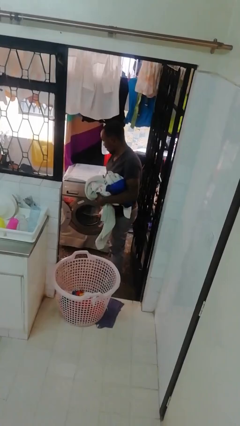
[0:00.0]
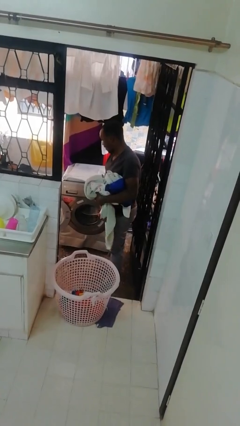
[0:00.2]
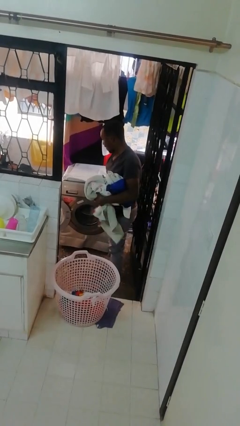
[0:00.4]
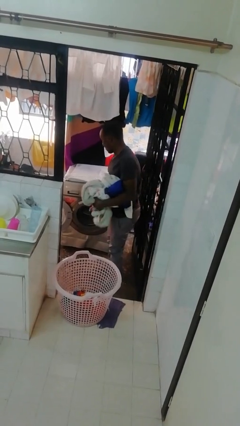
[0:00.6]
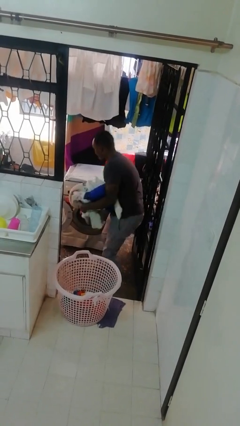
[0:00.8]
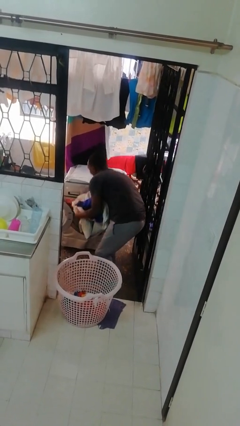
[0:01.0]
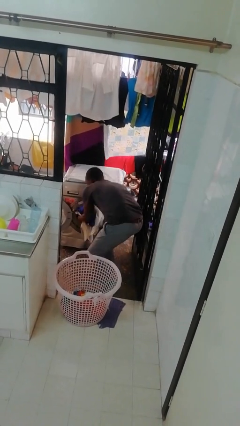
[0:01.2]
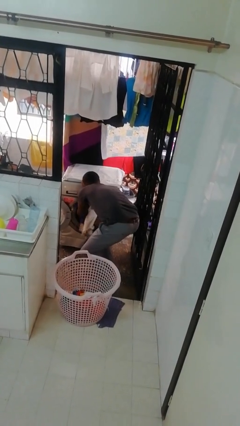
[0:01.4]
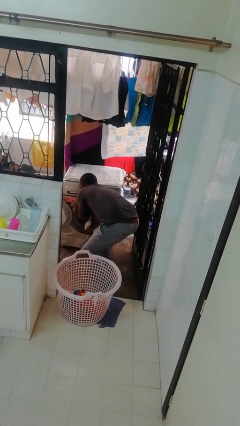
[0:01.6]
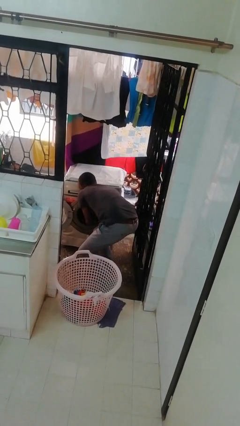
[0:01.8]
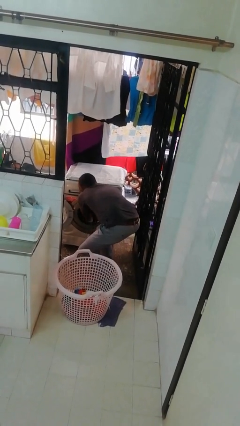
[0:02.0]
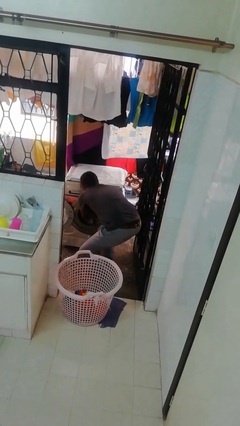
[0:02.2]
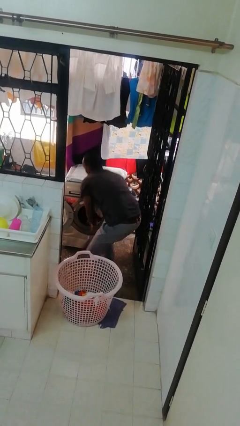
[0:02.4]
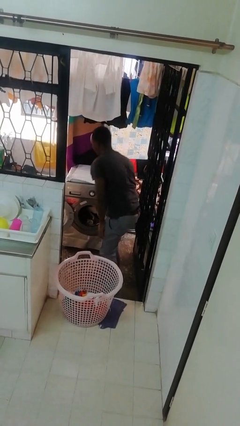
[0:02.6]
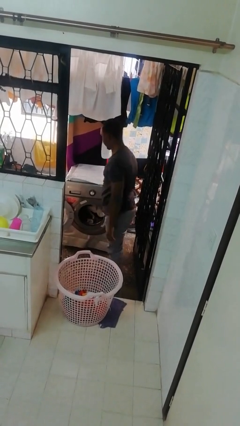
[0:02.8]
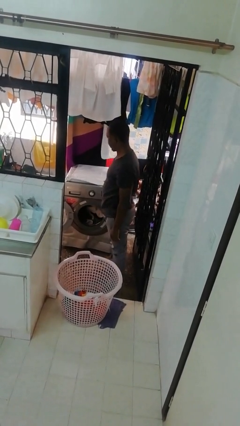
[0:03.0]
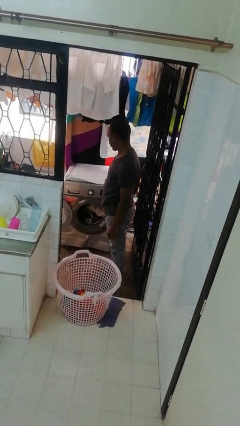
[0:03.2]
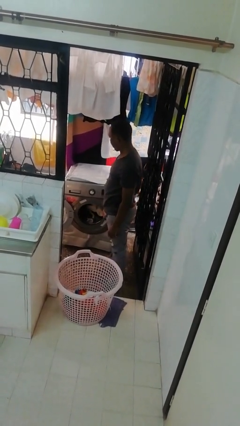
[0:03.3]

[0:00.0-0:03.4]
person loads clotheswasher

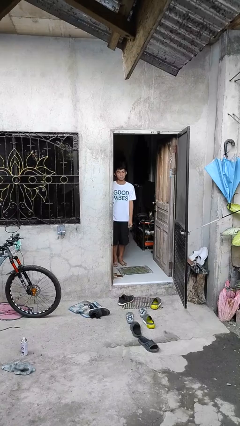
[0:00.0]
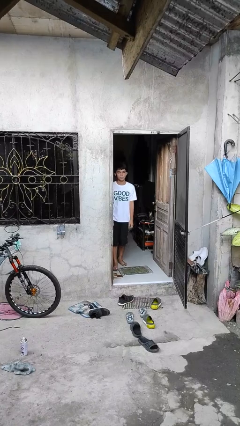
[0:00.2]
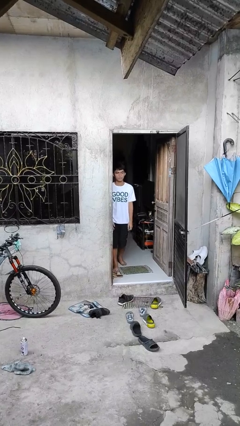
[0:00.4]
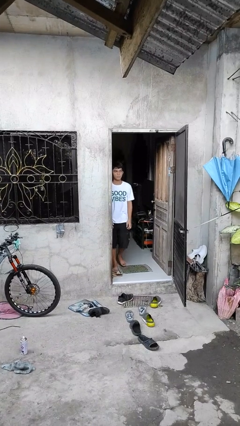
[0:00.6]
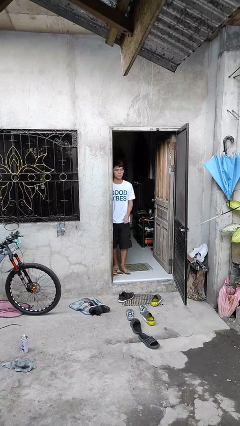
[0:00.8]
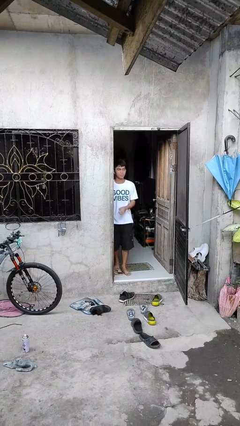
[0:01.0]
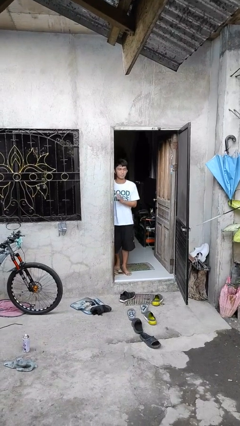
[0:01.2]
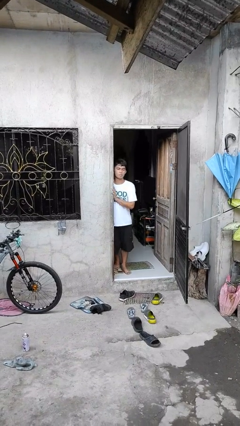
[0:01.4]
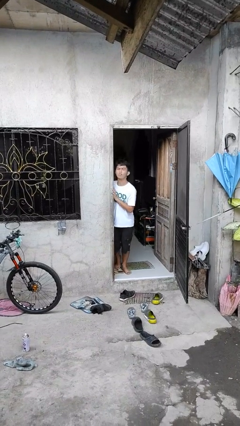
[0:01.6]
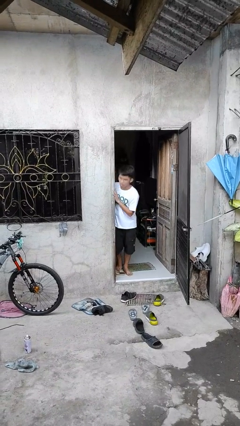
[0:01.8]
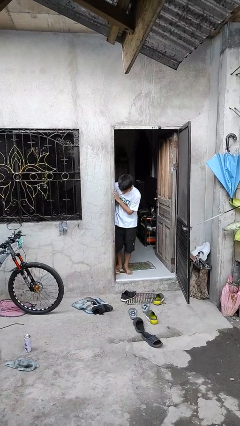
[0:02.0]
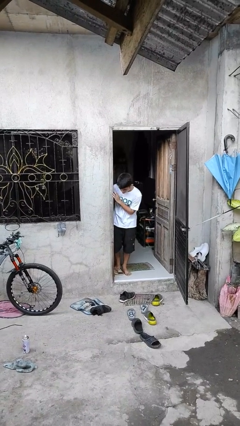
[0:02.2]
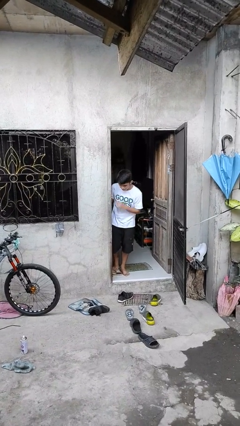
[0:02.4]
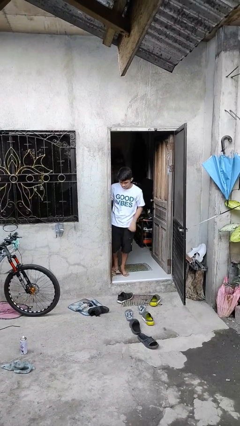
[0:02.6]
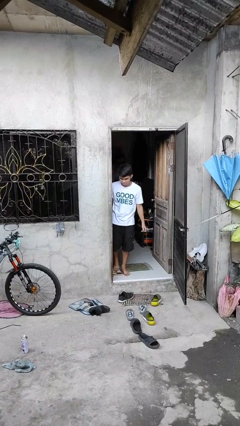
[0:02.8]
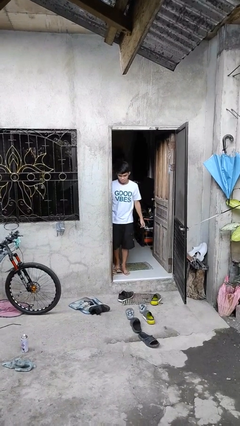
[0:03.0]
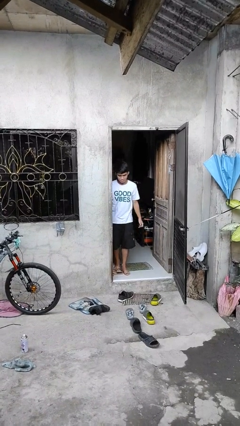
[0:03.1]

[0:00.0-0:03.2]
person bumps into wall

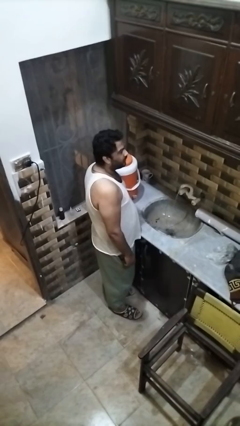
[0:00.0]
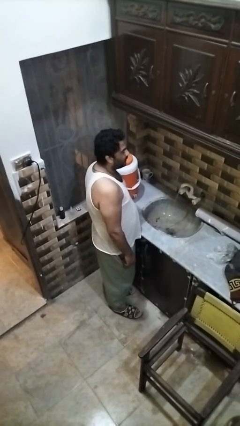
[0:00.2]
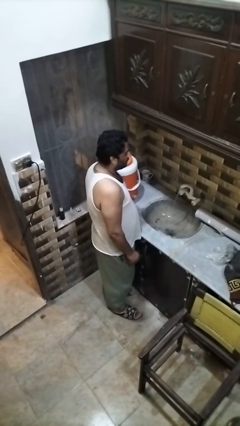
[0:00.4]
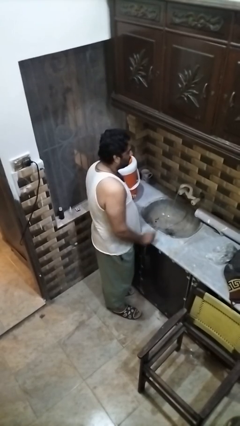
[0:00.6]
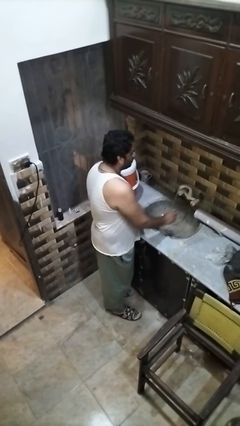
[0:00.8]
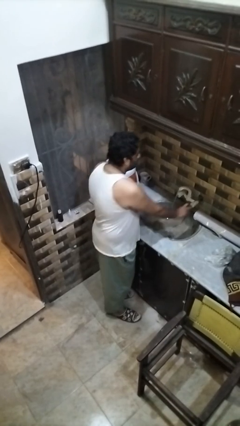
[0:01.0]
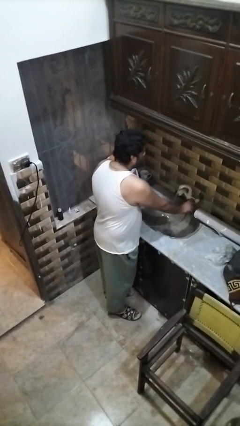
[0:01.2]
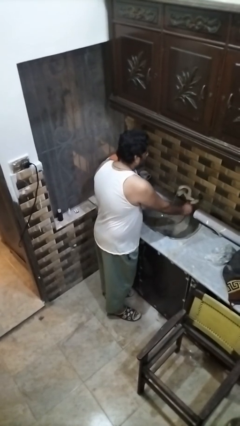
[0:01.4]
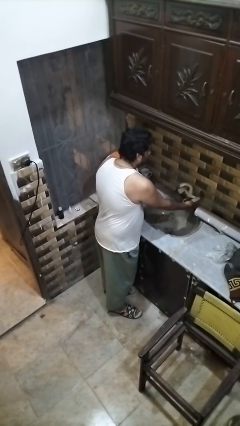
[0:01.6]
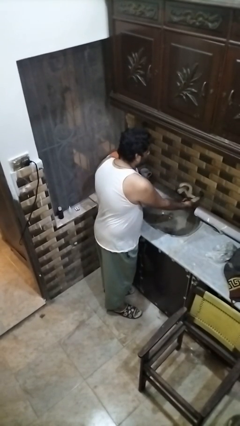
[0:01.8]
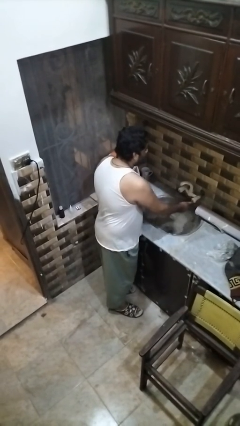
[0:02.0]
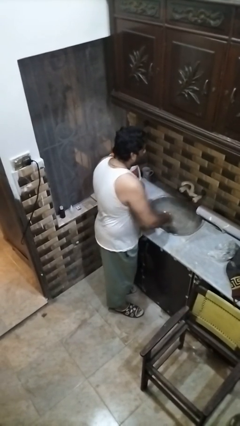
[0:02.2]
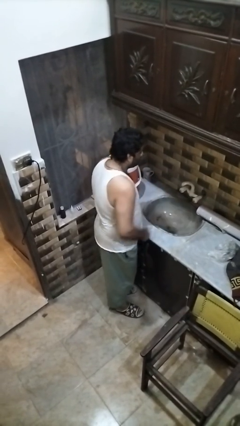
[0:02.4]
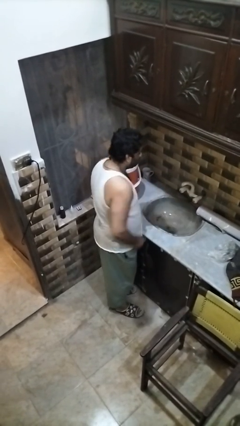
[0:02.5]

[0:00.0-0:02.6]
person turns off faucet

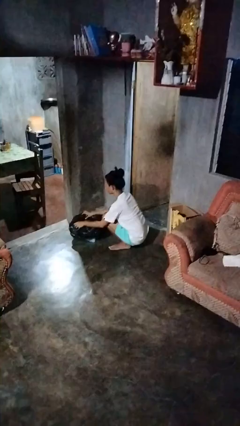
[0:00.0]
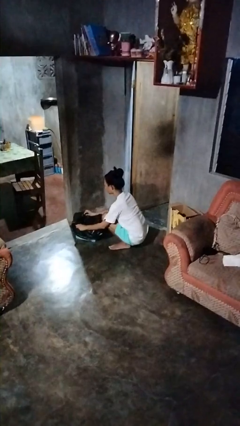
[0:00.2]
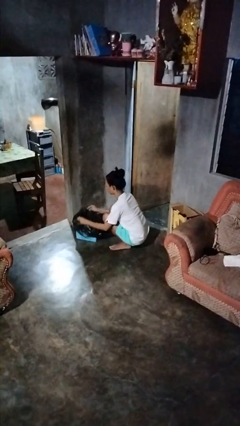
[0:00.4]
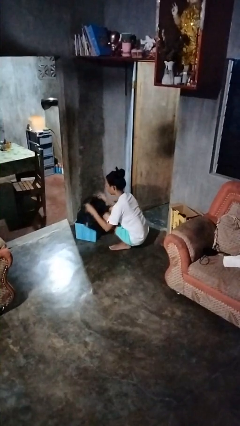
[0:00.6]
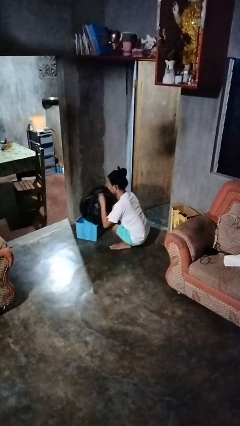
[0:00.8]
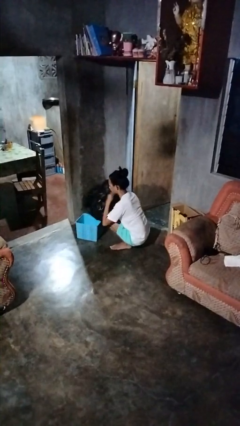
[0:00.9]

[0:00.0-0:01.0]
person removes trashbag from trashcan

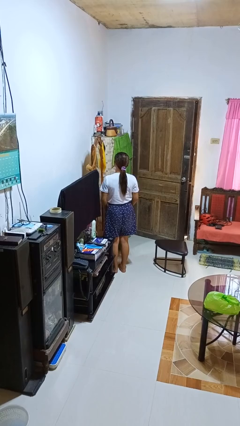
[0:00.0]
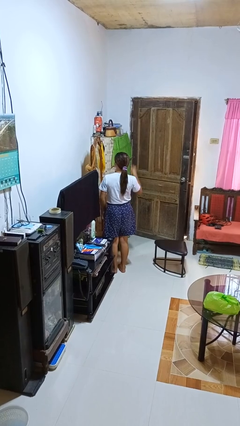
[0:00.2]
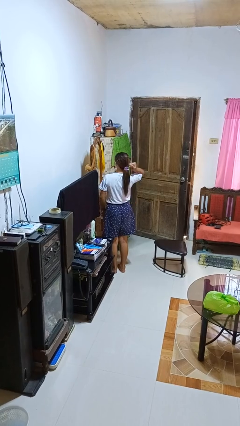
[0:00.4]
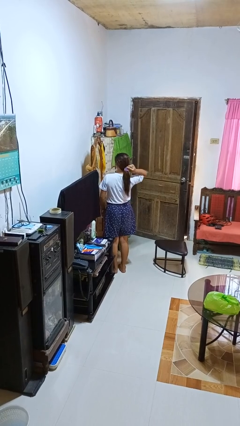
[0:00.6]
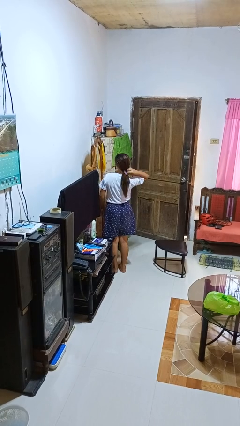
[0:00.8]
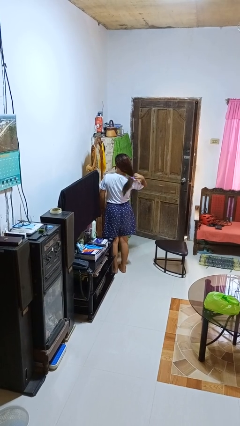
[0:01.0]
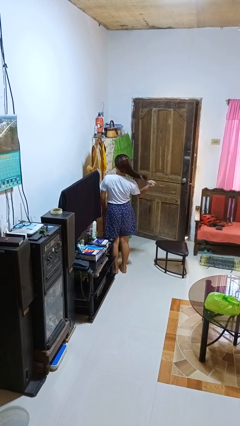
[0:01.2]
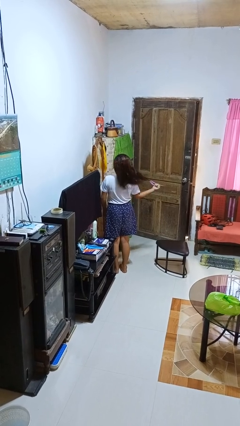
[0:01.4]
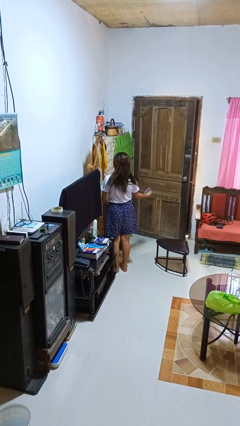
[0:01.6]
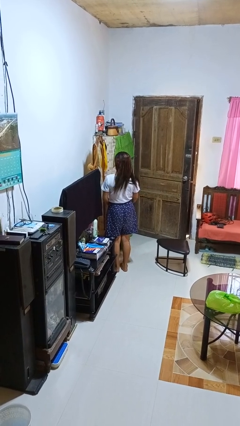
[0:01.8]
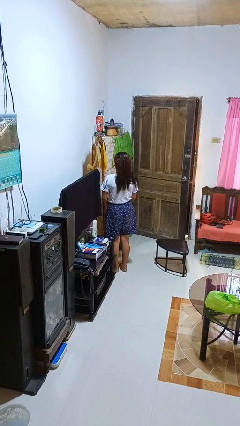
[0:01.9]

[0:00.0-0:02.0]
person takes off hairtie

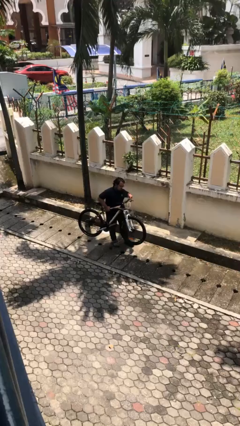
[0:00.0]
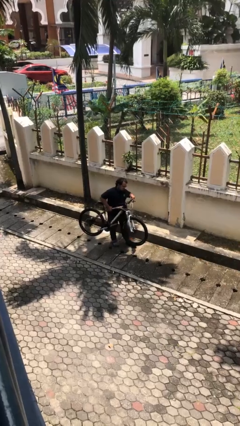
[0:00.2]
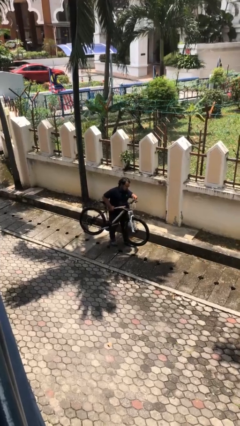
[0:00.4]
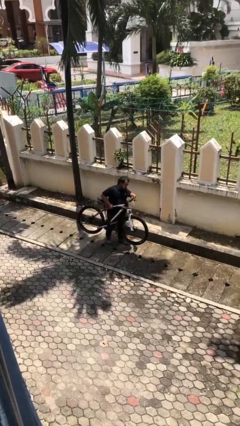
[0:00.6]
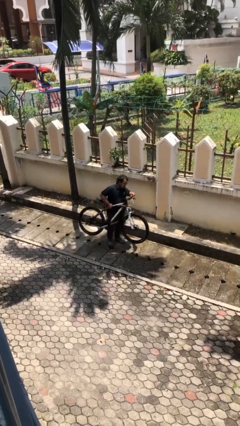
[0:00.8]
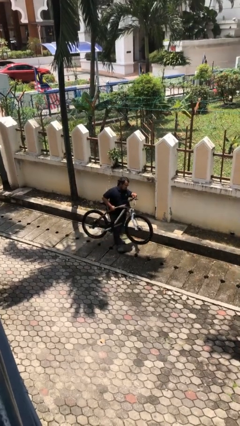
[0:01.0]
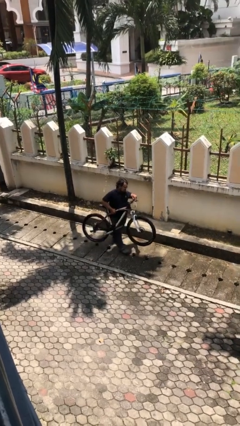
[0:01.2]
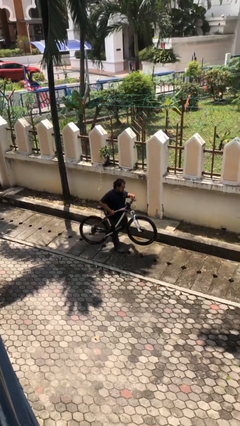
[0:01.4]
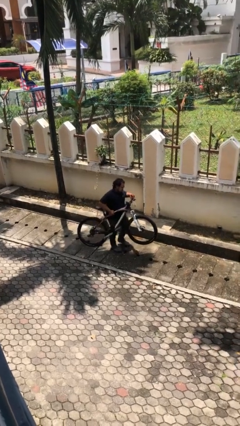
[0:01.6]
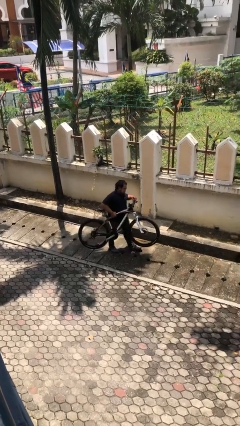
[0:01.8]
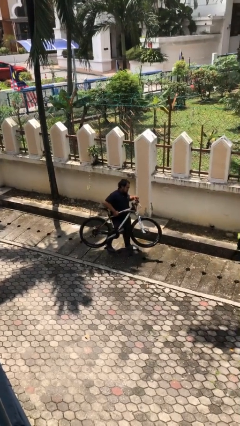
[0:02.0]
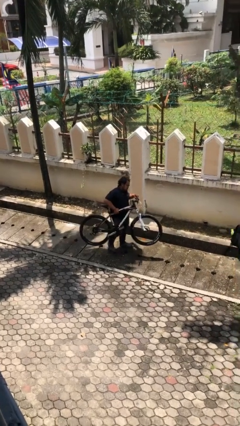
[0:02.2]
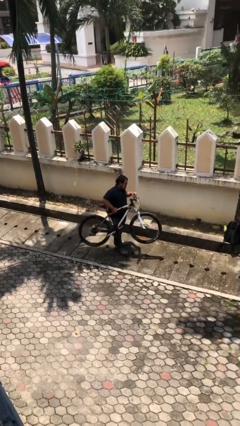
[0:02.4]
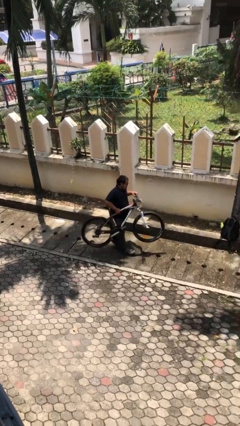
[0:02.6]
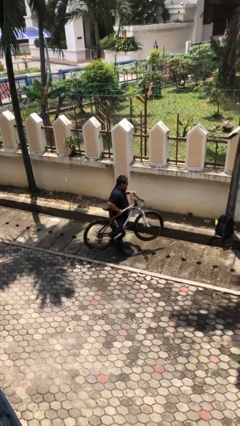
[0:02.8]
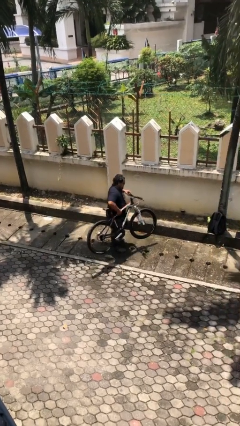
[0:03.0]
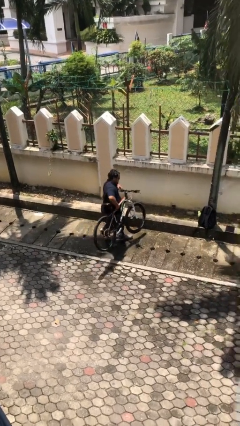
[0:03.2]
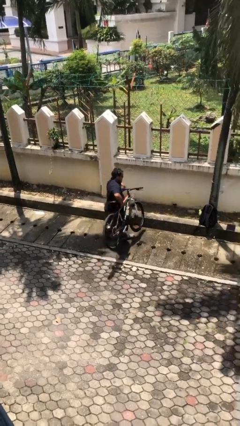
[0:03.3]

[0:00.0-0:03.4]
person carries heavy object

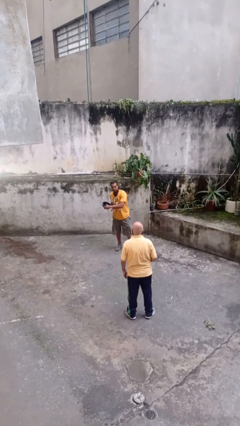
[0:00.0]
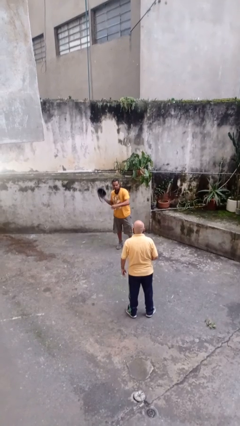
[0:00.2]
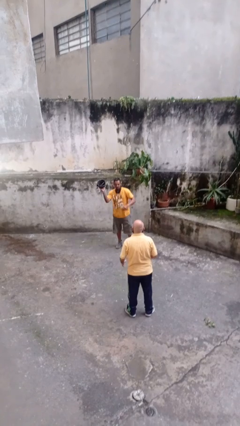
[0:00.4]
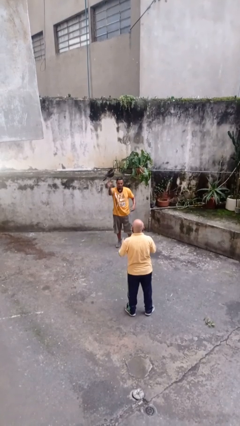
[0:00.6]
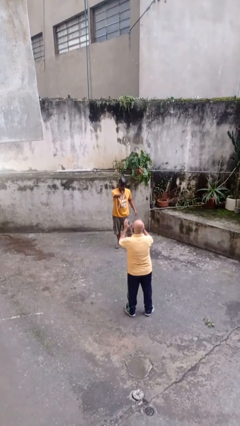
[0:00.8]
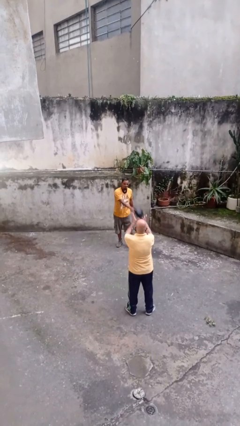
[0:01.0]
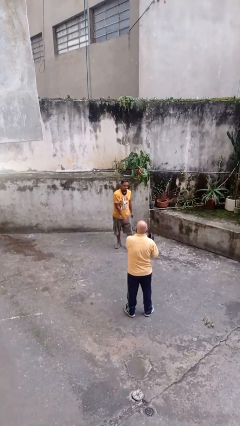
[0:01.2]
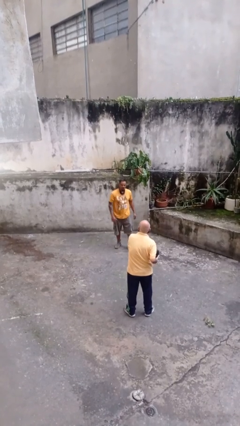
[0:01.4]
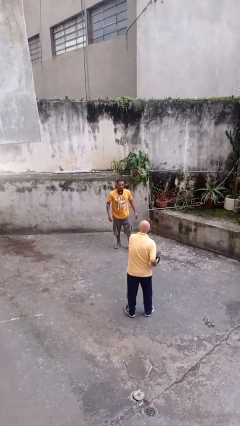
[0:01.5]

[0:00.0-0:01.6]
person throws object to person
